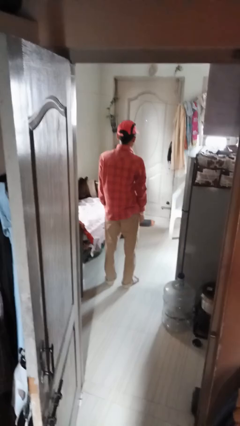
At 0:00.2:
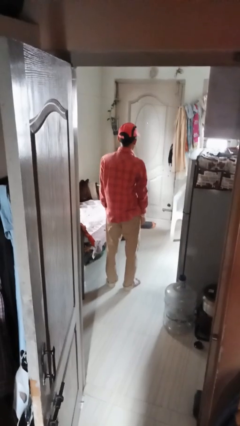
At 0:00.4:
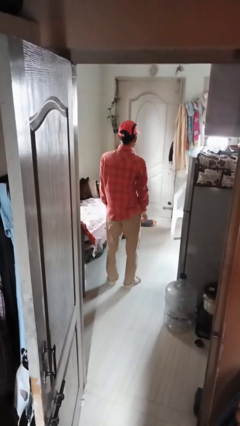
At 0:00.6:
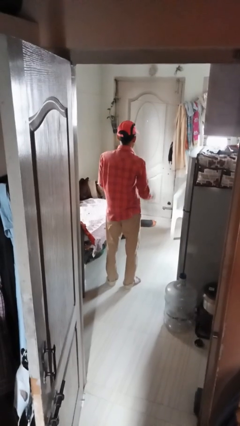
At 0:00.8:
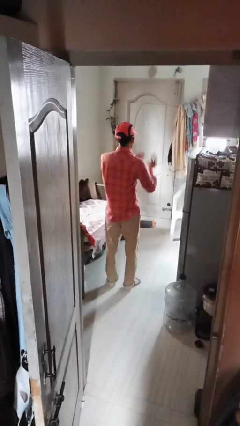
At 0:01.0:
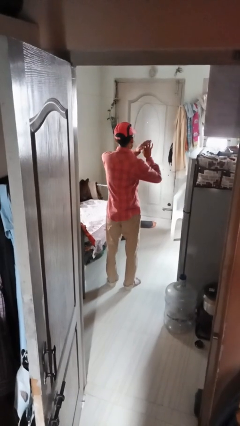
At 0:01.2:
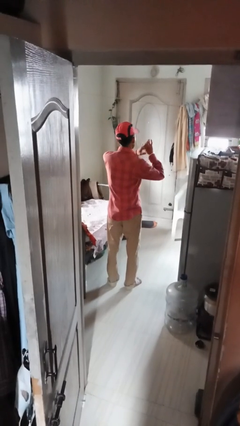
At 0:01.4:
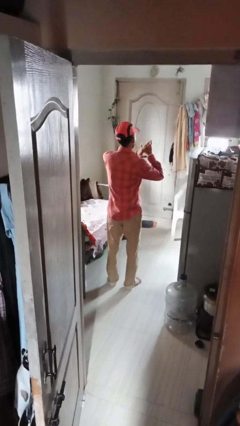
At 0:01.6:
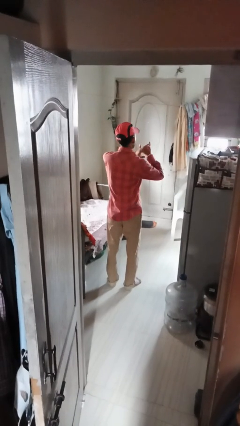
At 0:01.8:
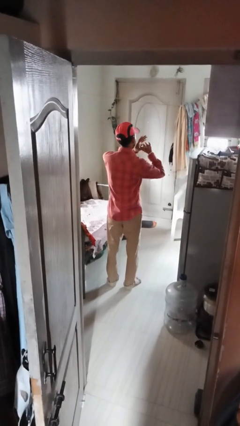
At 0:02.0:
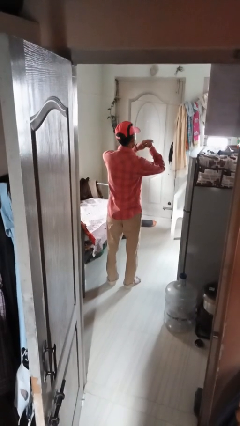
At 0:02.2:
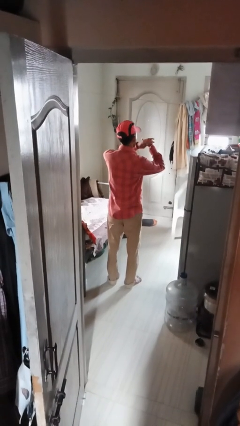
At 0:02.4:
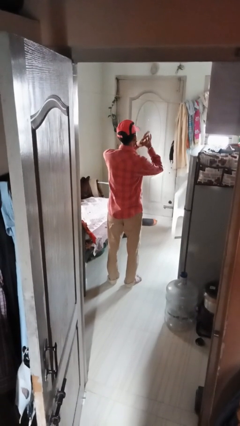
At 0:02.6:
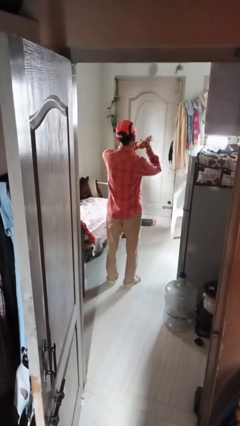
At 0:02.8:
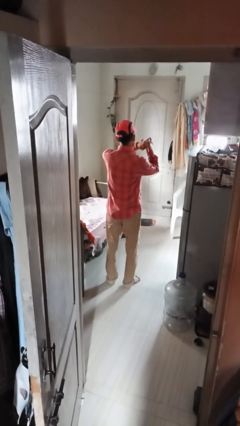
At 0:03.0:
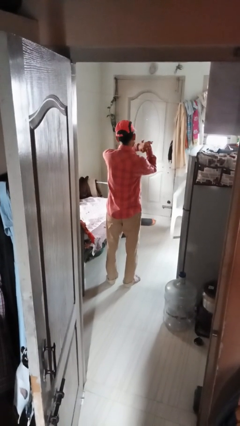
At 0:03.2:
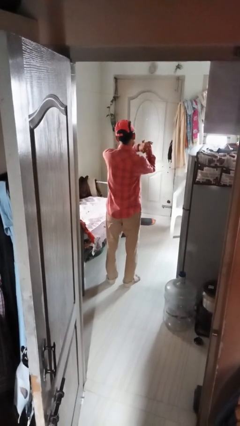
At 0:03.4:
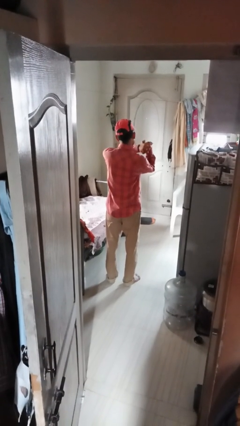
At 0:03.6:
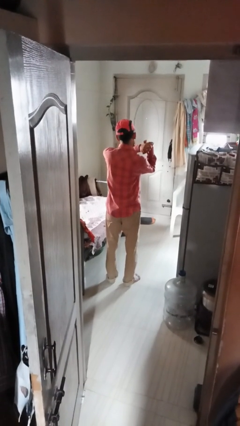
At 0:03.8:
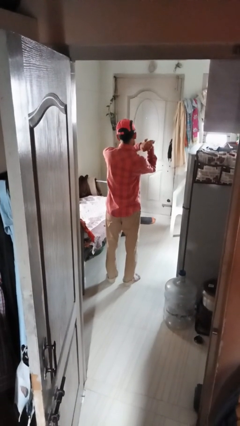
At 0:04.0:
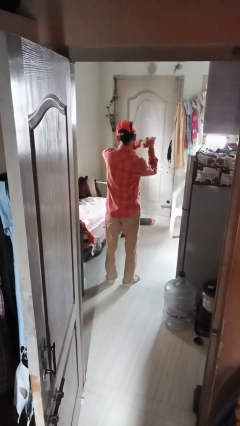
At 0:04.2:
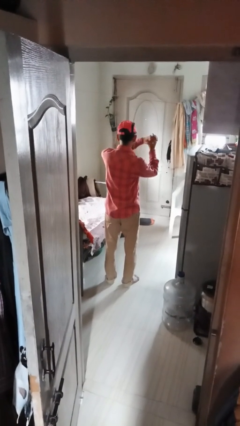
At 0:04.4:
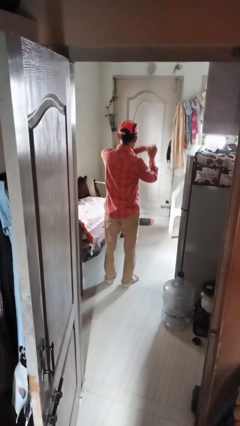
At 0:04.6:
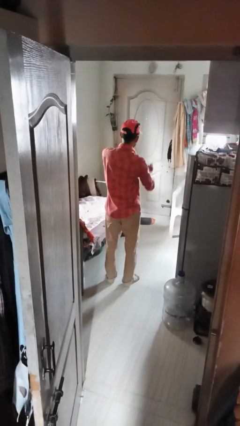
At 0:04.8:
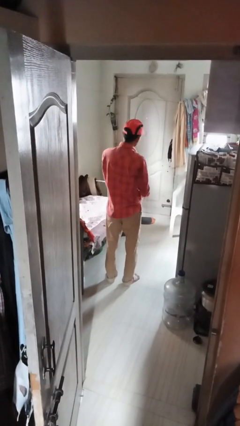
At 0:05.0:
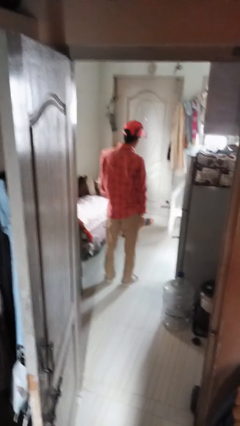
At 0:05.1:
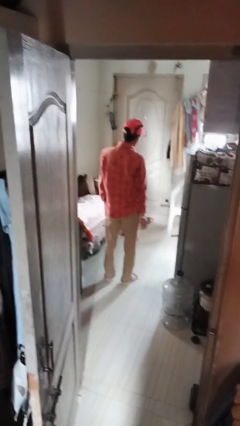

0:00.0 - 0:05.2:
person cracks knuckles

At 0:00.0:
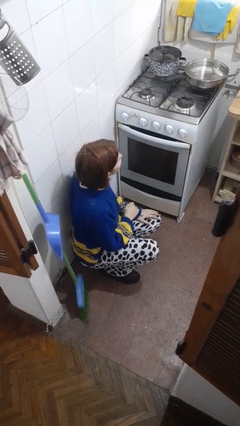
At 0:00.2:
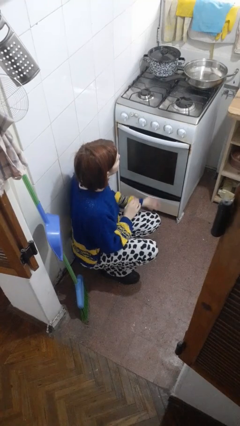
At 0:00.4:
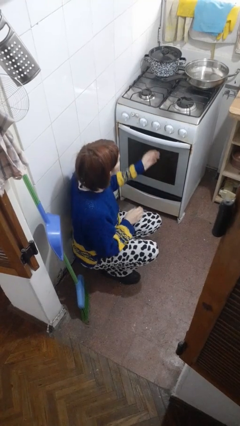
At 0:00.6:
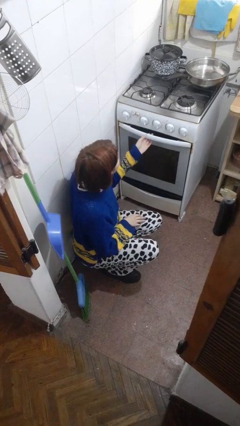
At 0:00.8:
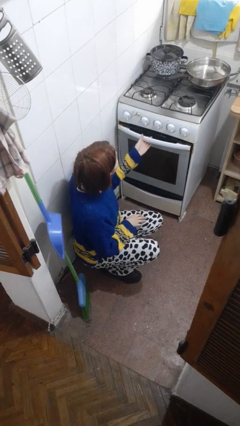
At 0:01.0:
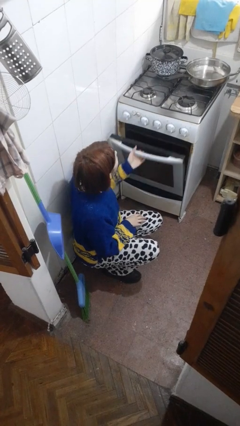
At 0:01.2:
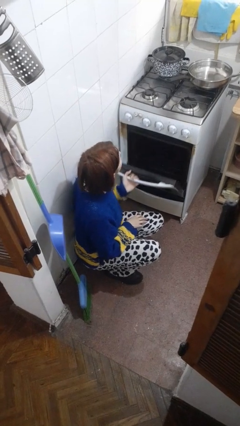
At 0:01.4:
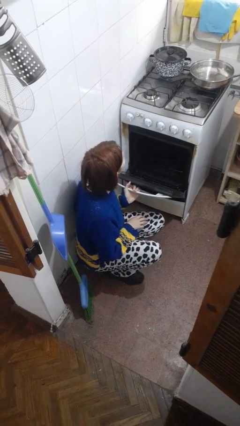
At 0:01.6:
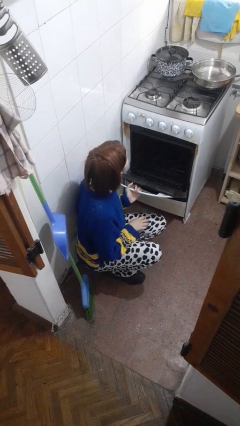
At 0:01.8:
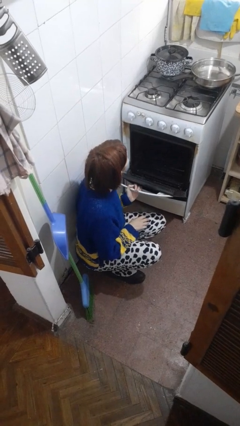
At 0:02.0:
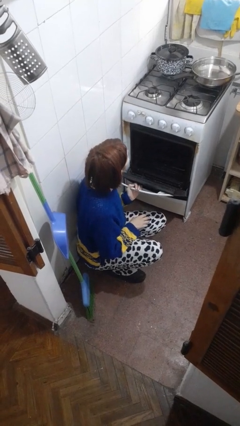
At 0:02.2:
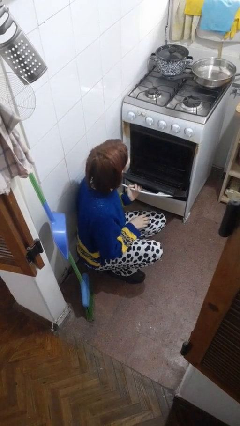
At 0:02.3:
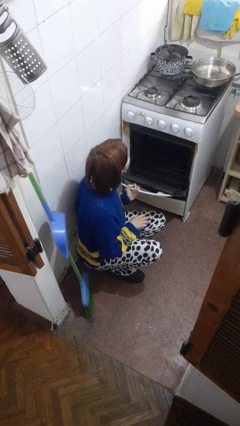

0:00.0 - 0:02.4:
person opens oven door

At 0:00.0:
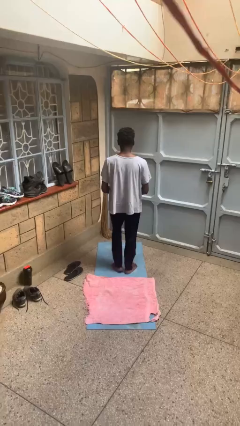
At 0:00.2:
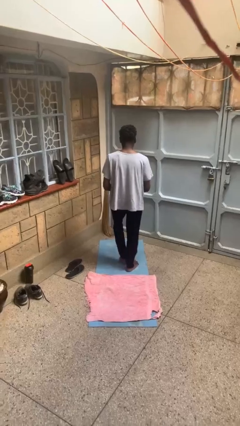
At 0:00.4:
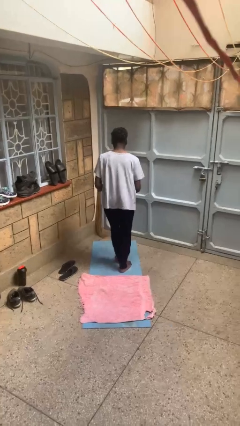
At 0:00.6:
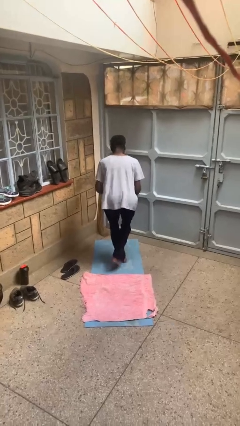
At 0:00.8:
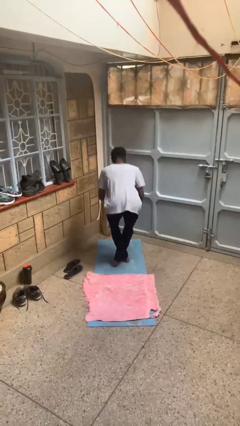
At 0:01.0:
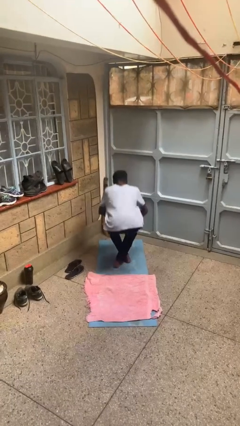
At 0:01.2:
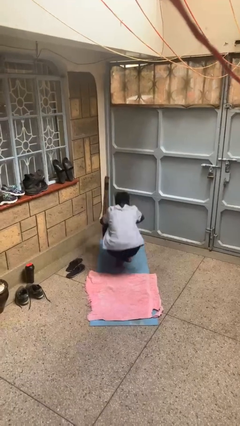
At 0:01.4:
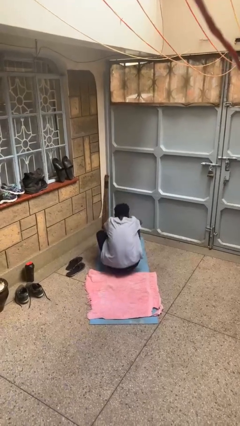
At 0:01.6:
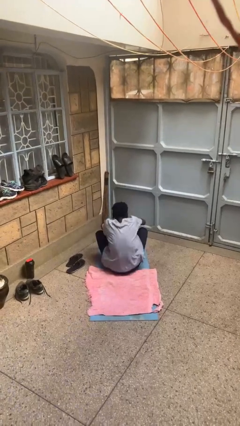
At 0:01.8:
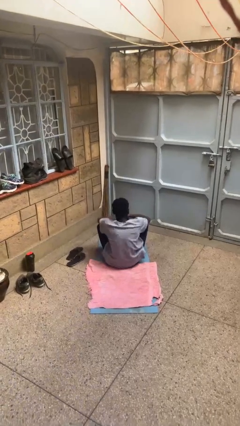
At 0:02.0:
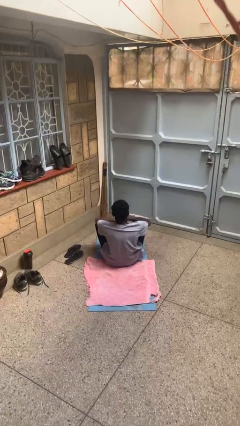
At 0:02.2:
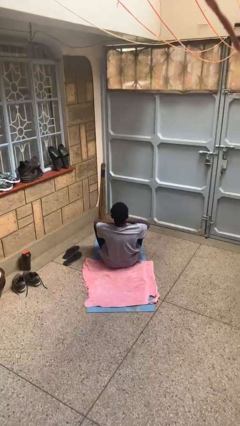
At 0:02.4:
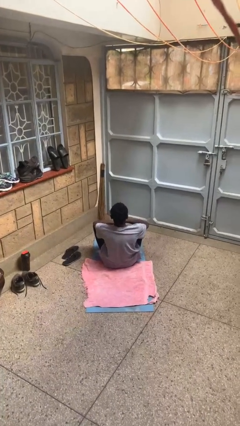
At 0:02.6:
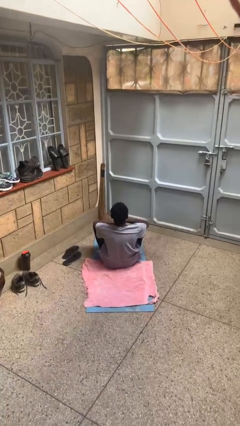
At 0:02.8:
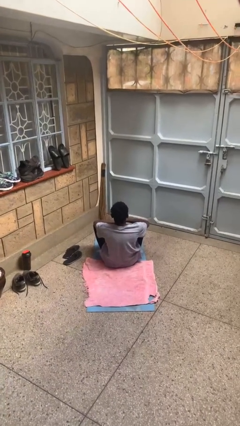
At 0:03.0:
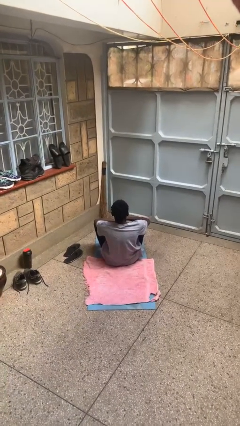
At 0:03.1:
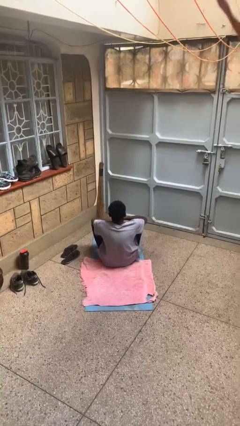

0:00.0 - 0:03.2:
person sits crisscross

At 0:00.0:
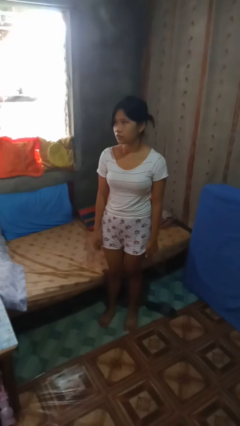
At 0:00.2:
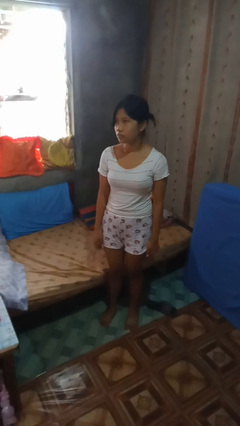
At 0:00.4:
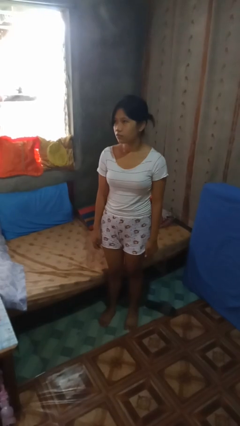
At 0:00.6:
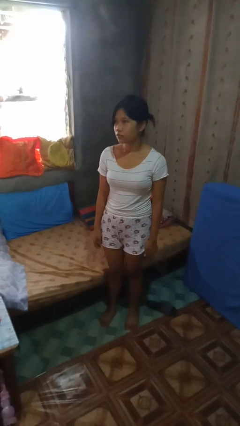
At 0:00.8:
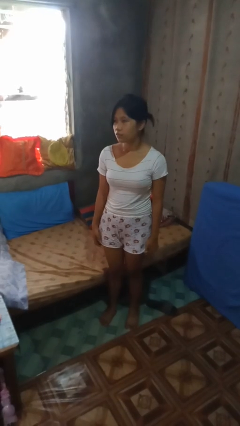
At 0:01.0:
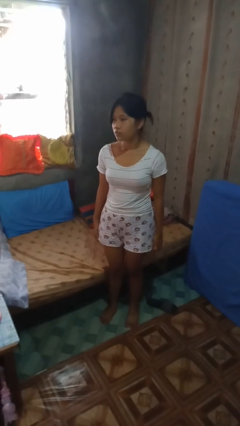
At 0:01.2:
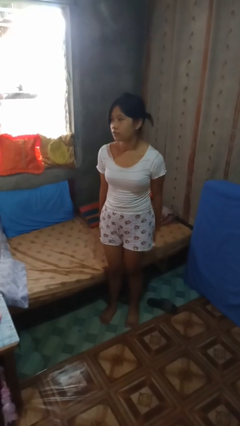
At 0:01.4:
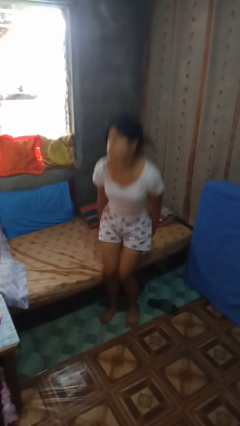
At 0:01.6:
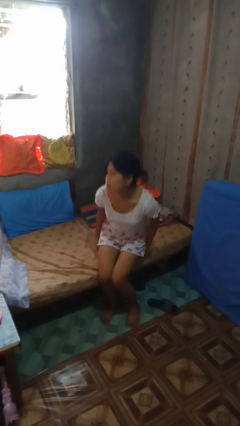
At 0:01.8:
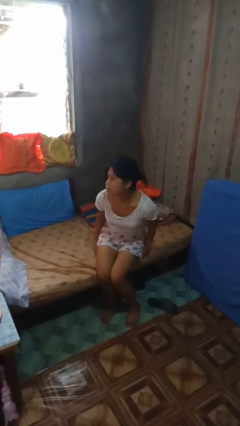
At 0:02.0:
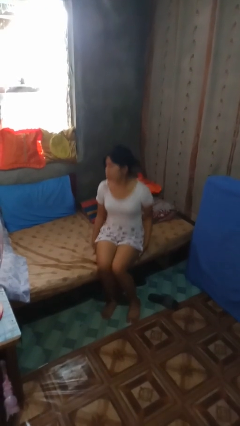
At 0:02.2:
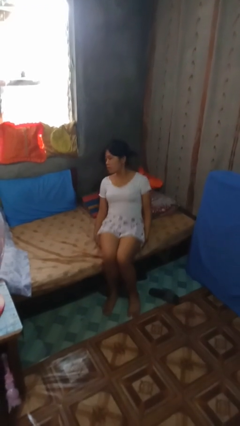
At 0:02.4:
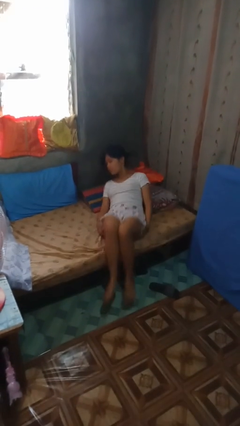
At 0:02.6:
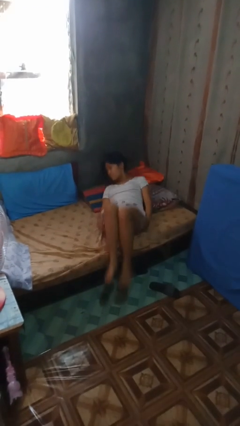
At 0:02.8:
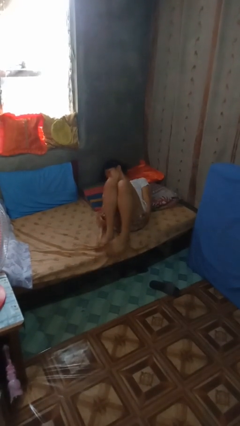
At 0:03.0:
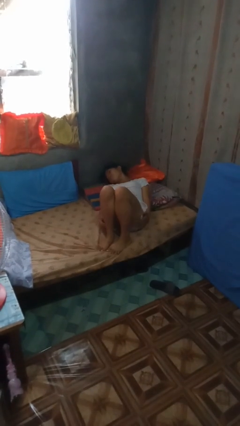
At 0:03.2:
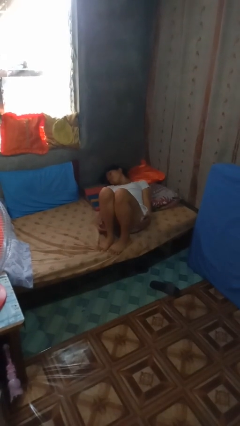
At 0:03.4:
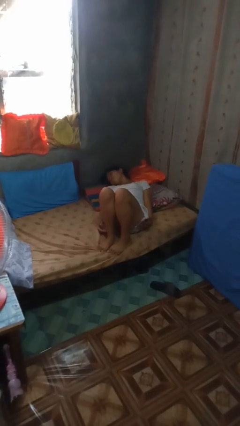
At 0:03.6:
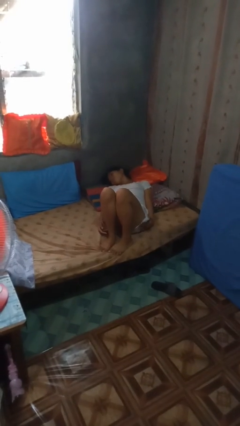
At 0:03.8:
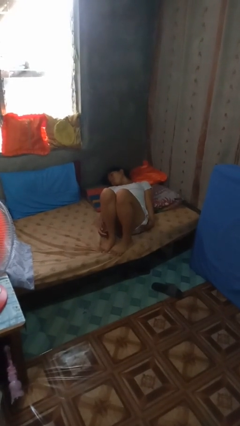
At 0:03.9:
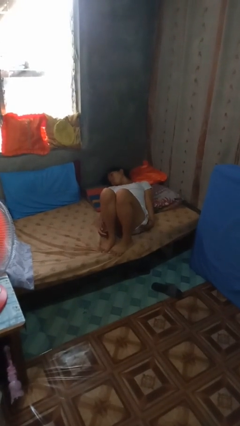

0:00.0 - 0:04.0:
person lies down on bed

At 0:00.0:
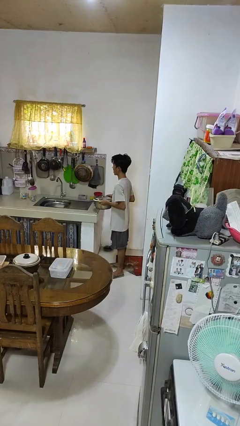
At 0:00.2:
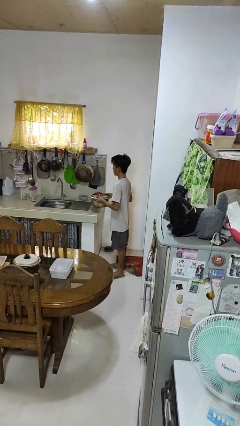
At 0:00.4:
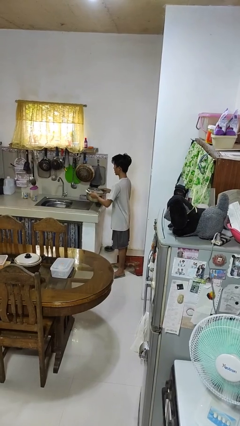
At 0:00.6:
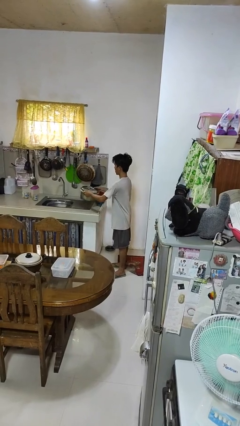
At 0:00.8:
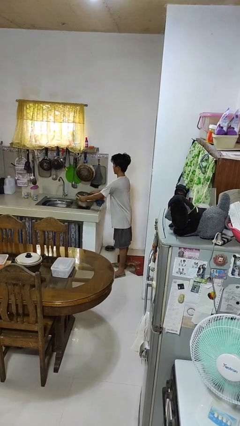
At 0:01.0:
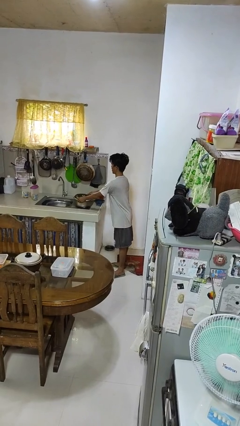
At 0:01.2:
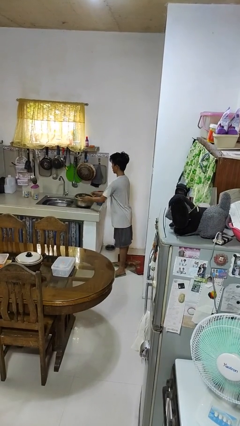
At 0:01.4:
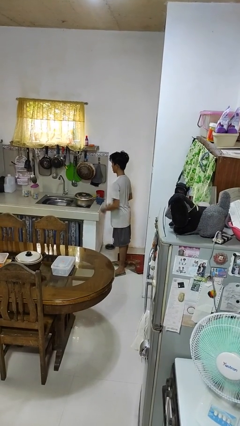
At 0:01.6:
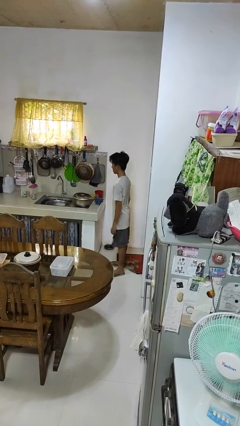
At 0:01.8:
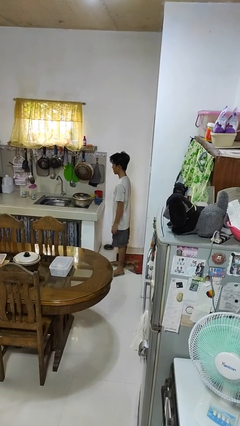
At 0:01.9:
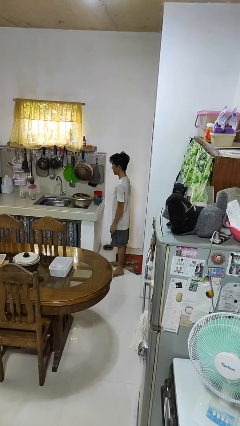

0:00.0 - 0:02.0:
person puts down object on countertop

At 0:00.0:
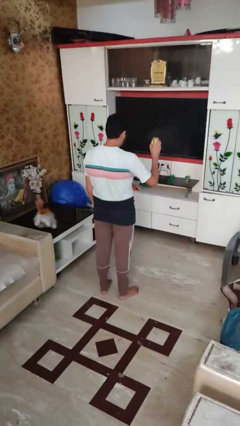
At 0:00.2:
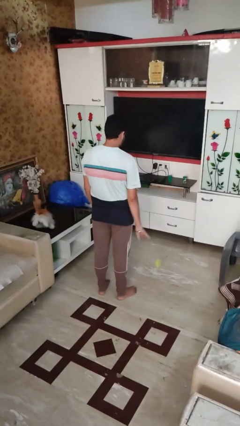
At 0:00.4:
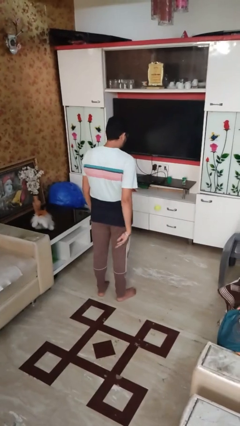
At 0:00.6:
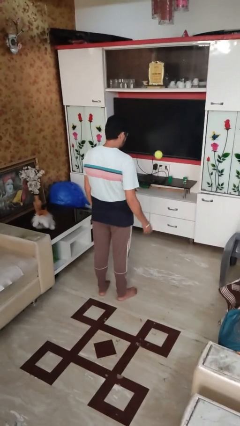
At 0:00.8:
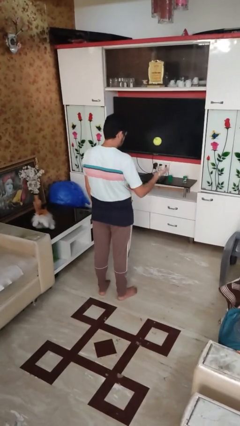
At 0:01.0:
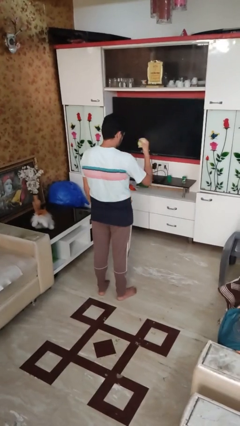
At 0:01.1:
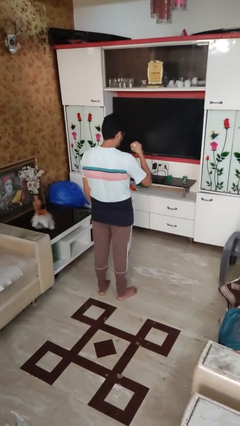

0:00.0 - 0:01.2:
person bounces ball on floor
